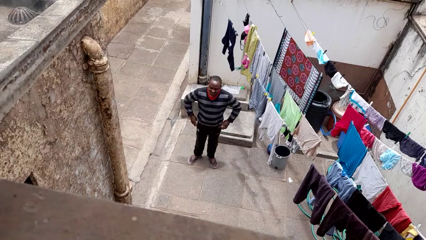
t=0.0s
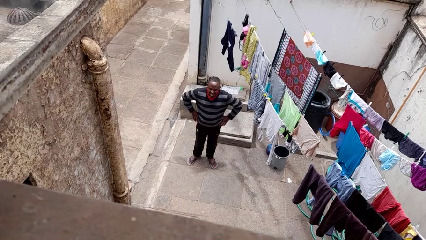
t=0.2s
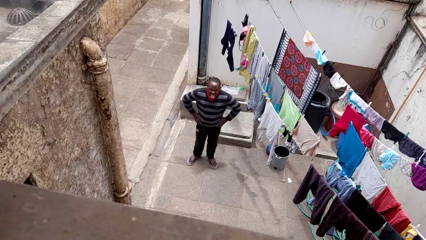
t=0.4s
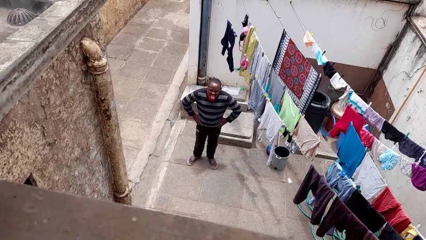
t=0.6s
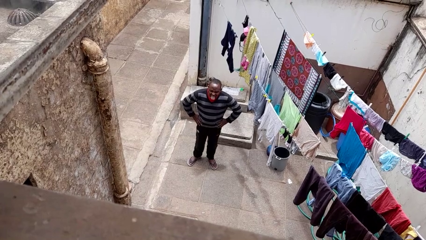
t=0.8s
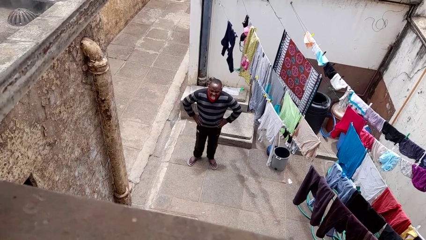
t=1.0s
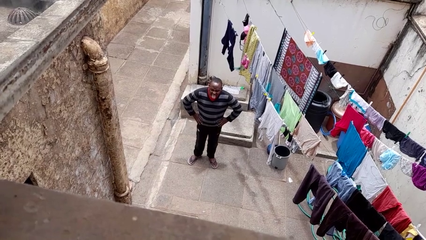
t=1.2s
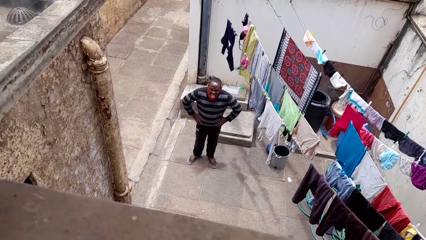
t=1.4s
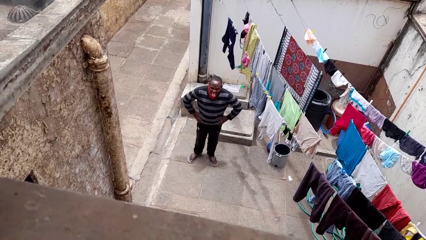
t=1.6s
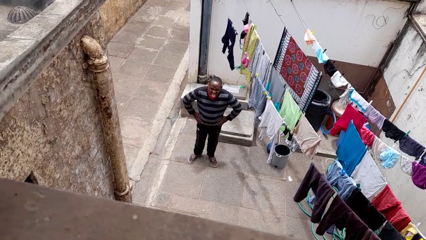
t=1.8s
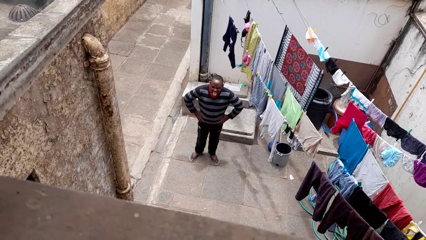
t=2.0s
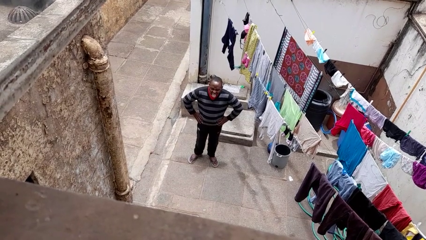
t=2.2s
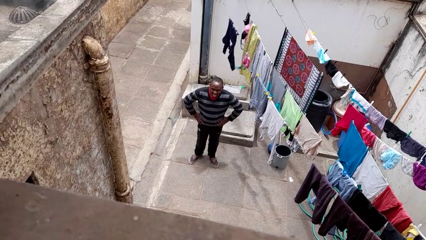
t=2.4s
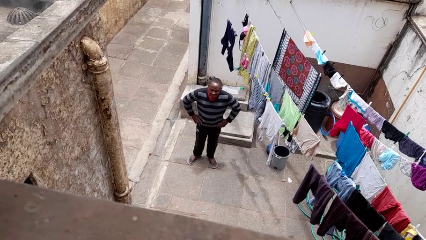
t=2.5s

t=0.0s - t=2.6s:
person sticks out tongue

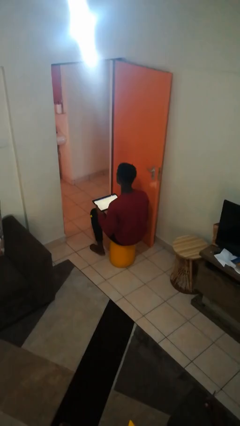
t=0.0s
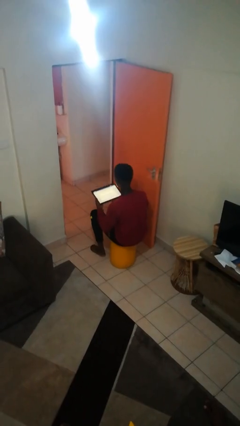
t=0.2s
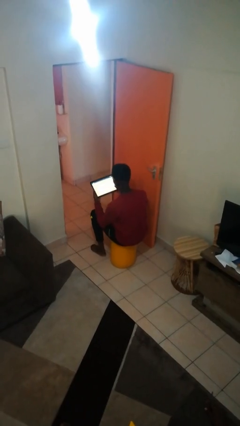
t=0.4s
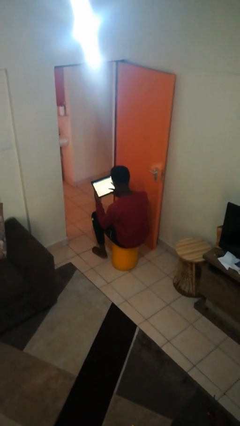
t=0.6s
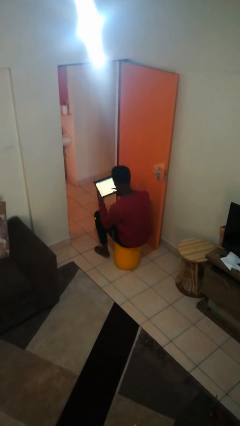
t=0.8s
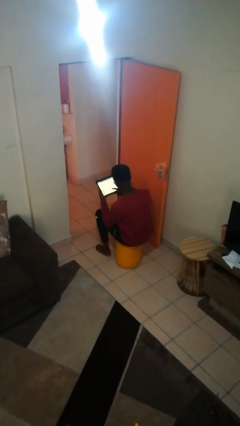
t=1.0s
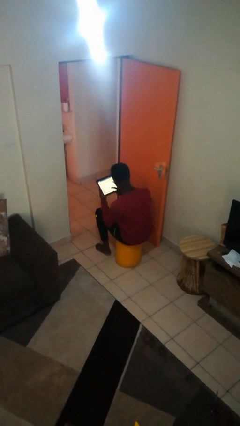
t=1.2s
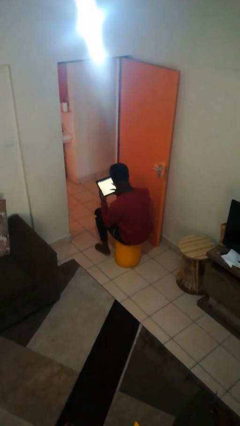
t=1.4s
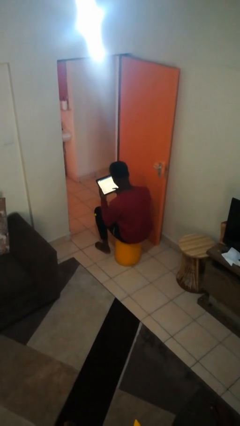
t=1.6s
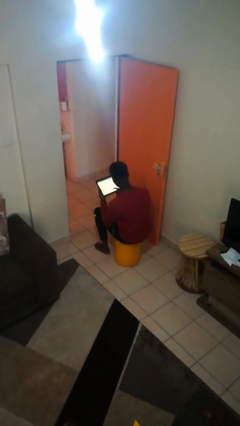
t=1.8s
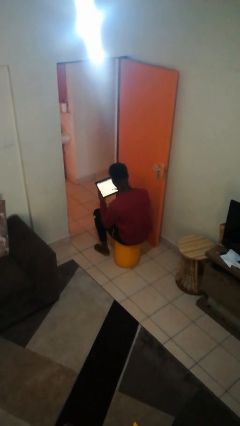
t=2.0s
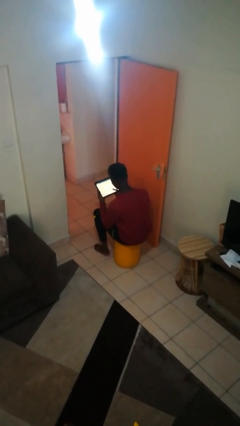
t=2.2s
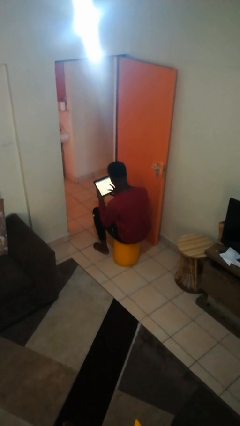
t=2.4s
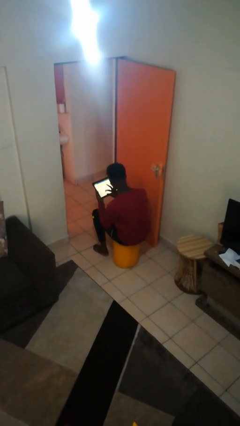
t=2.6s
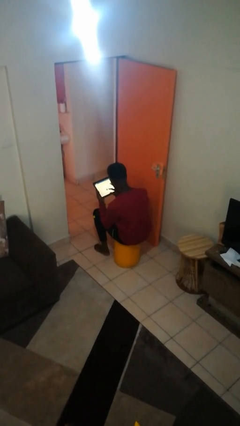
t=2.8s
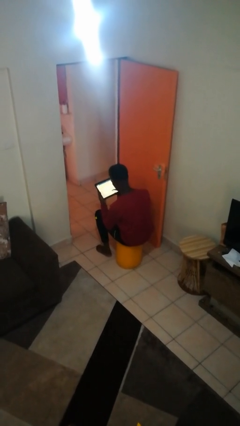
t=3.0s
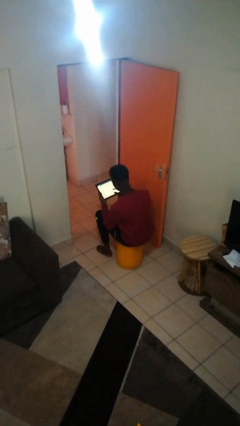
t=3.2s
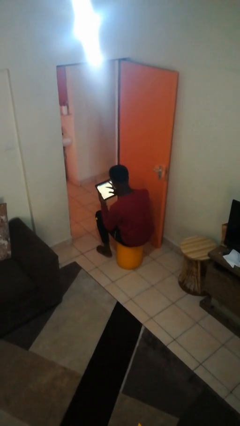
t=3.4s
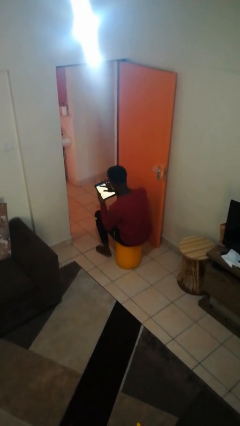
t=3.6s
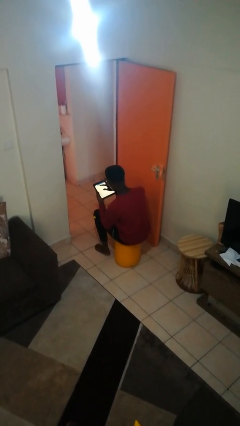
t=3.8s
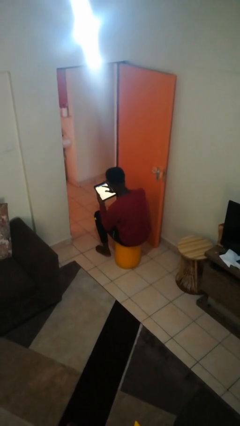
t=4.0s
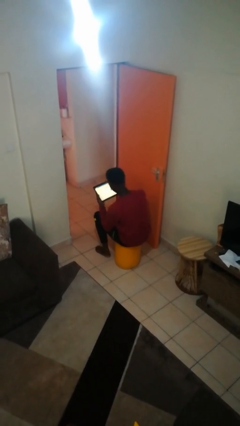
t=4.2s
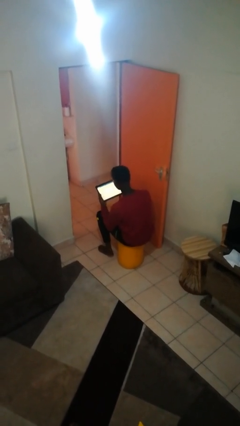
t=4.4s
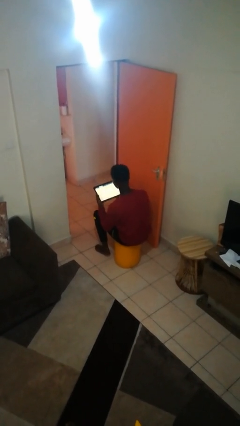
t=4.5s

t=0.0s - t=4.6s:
person interacts with tablet

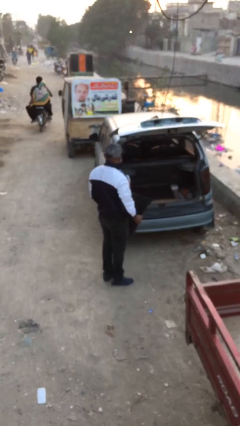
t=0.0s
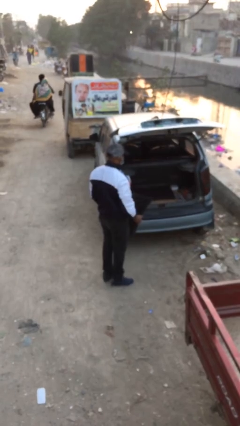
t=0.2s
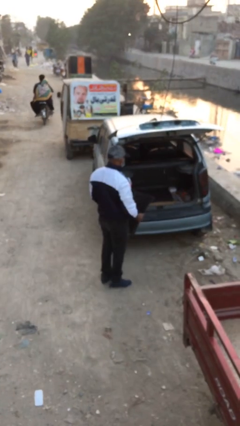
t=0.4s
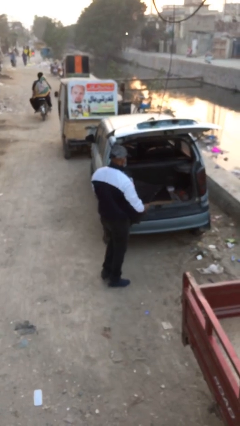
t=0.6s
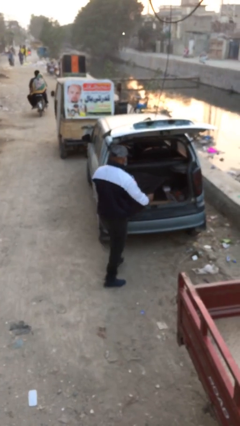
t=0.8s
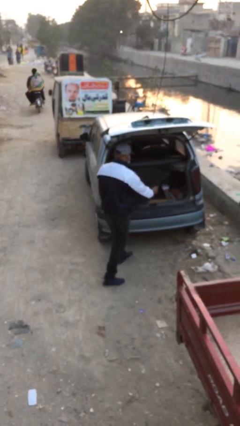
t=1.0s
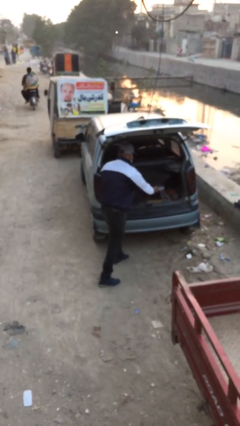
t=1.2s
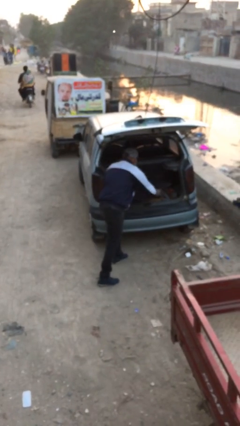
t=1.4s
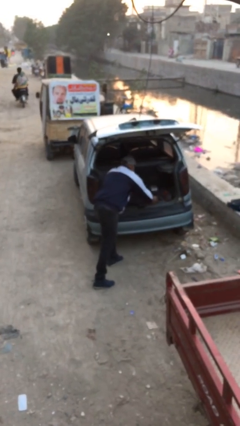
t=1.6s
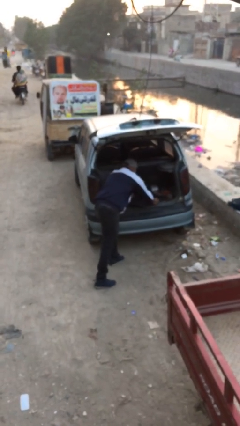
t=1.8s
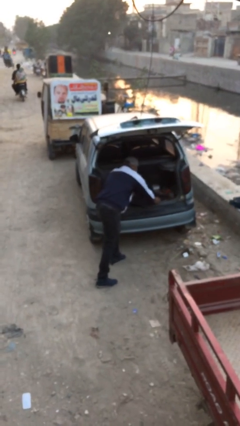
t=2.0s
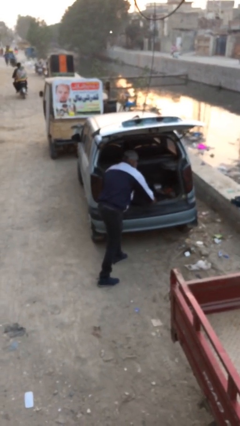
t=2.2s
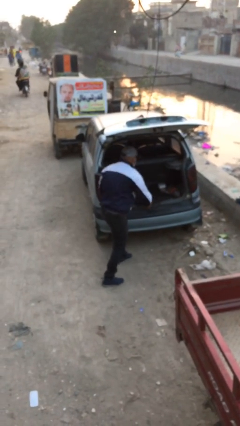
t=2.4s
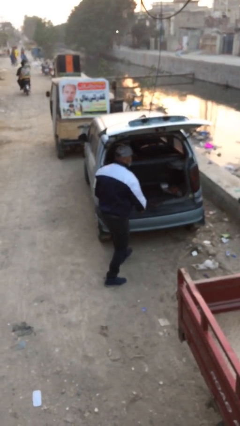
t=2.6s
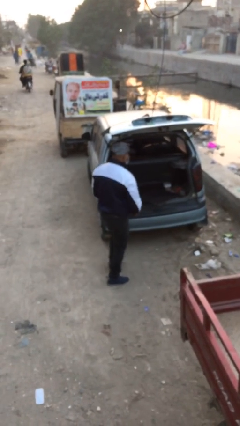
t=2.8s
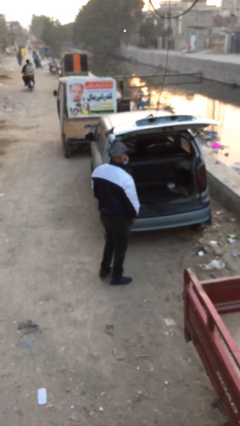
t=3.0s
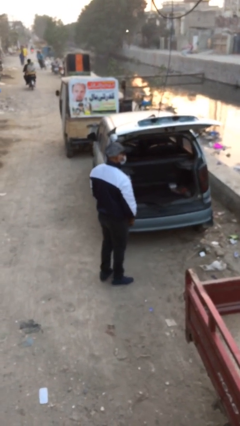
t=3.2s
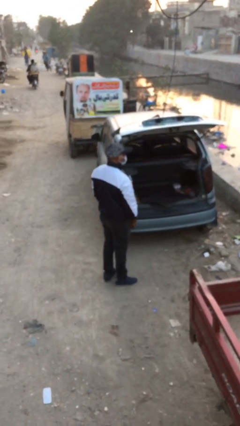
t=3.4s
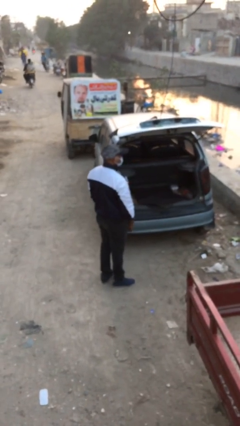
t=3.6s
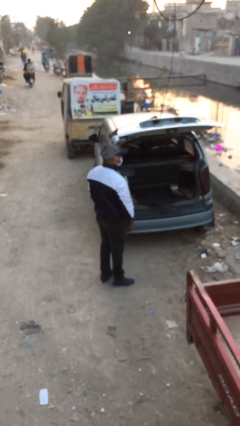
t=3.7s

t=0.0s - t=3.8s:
person loads car

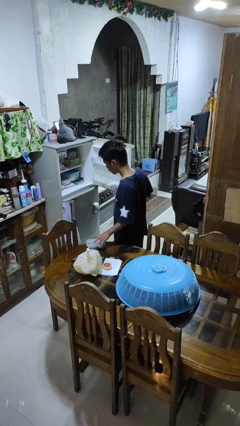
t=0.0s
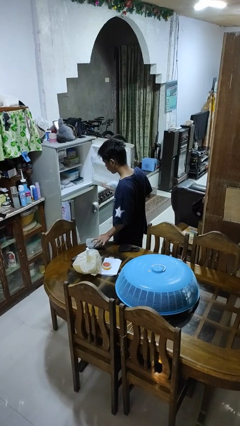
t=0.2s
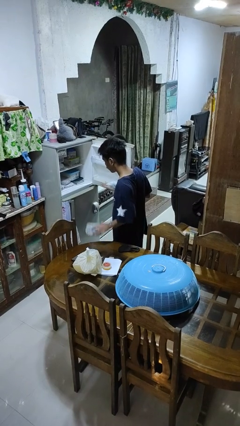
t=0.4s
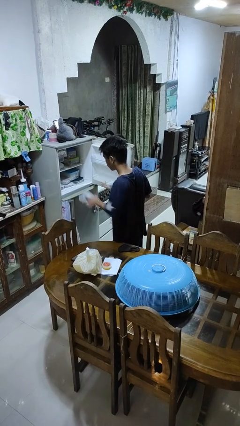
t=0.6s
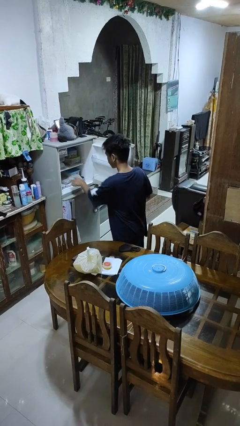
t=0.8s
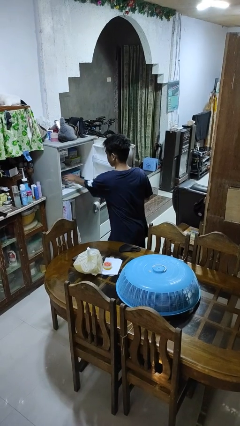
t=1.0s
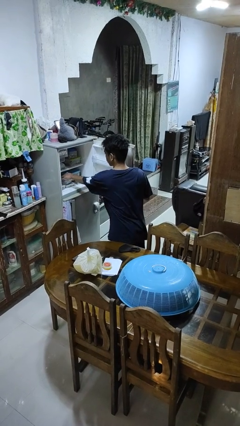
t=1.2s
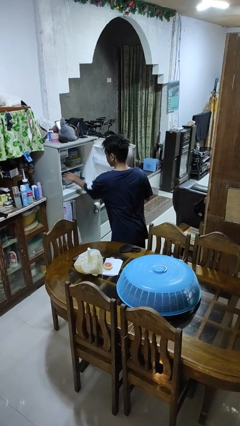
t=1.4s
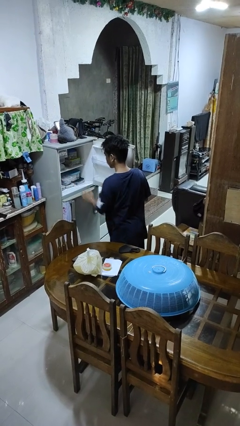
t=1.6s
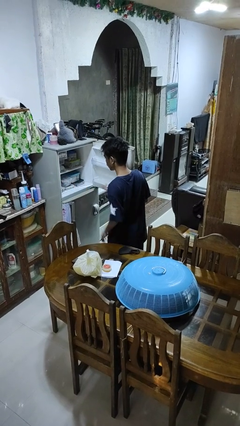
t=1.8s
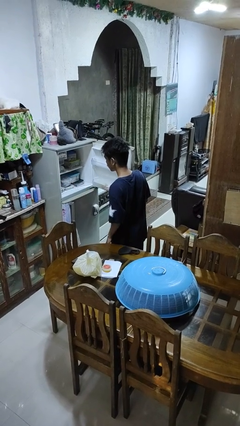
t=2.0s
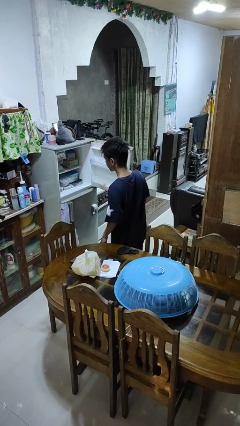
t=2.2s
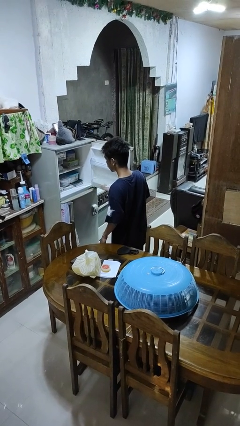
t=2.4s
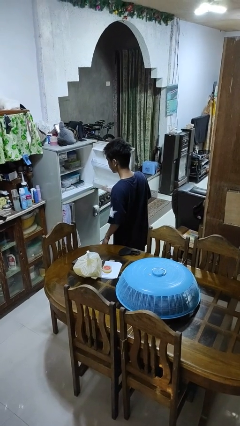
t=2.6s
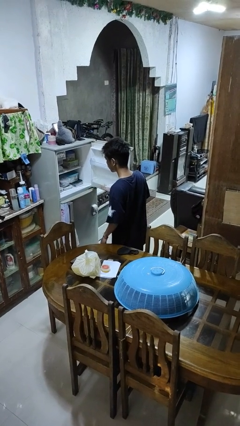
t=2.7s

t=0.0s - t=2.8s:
person puts object into refrigerator

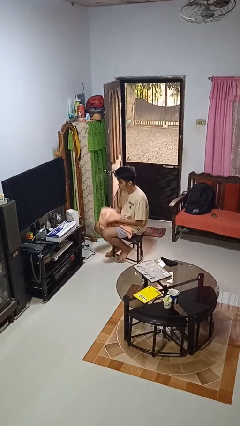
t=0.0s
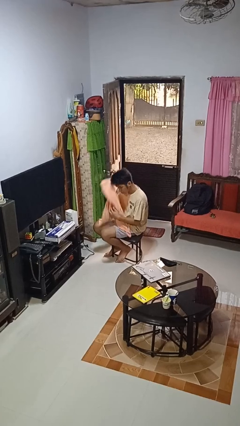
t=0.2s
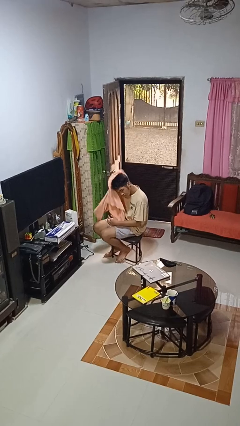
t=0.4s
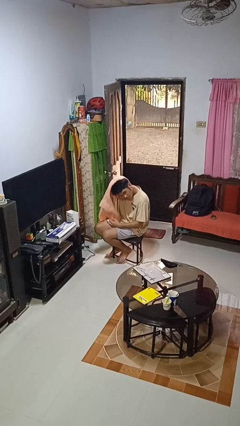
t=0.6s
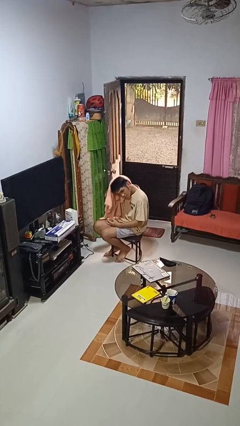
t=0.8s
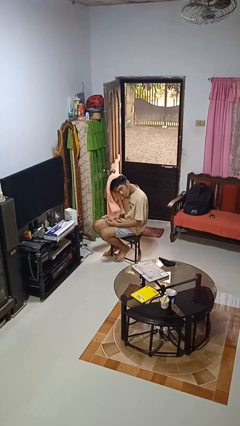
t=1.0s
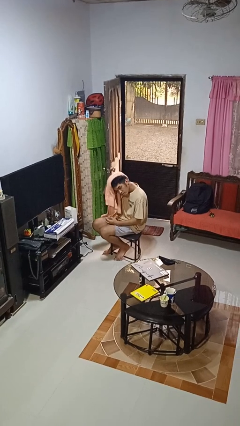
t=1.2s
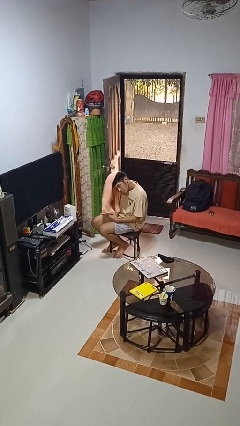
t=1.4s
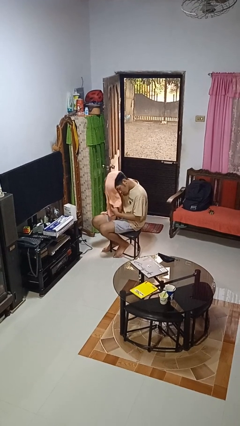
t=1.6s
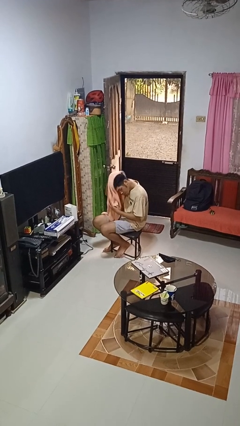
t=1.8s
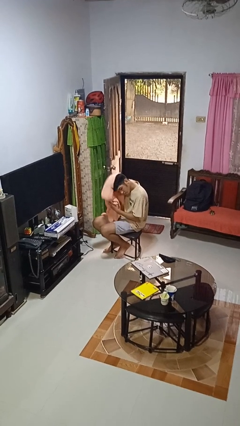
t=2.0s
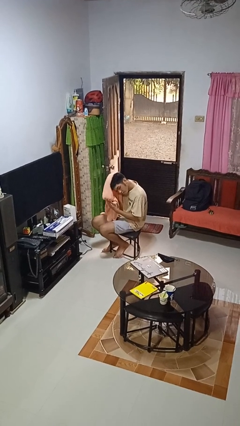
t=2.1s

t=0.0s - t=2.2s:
person dries hair with towel

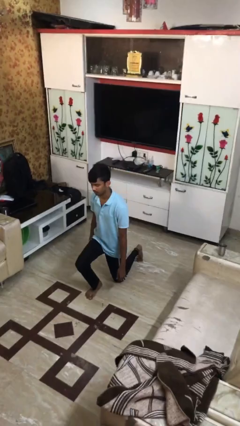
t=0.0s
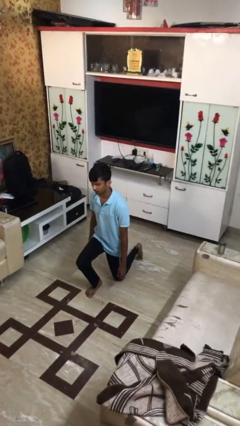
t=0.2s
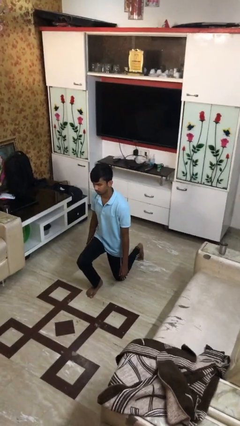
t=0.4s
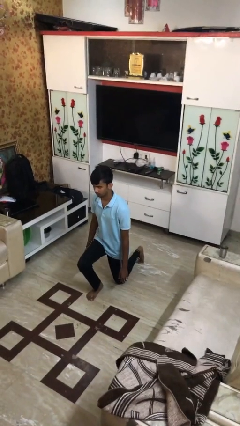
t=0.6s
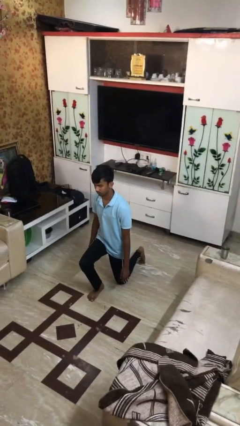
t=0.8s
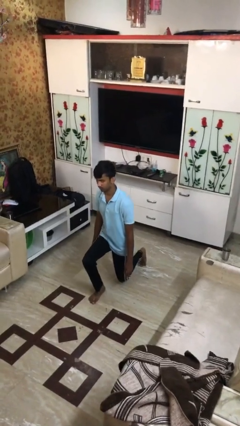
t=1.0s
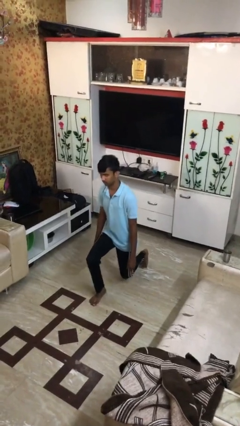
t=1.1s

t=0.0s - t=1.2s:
person exercises with lunges
